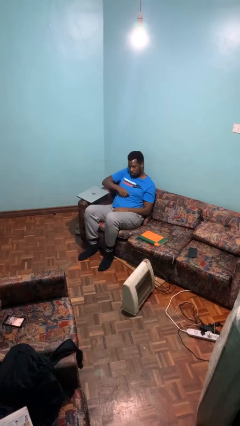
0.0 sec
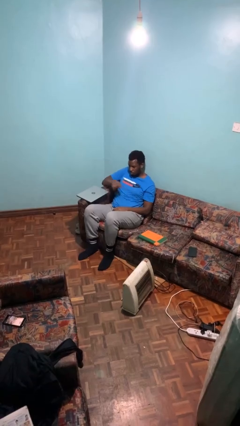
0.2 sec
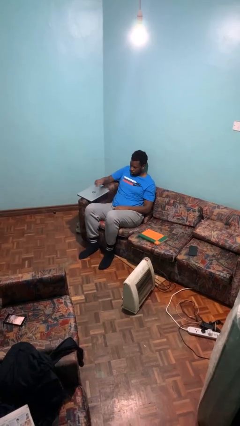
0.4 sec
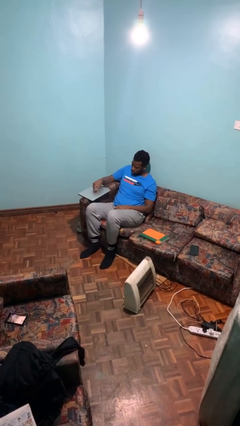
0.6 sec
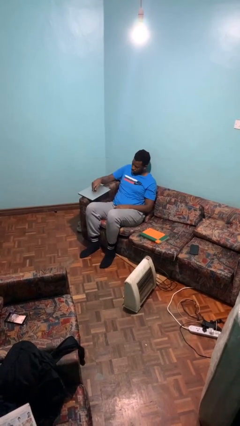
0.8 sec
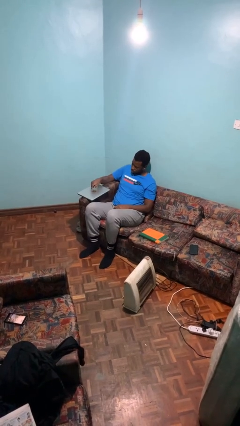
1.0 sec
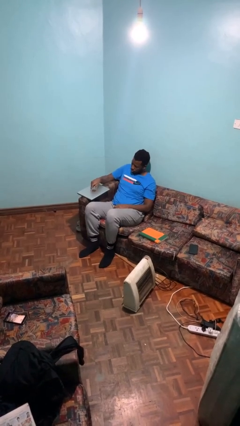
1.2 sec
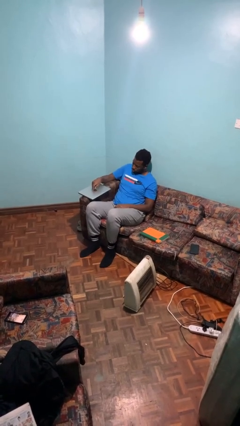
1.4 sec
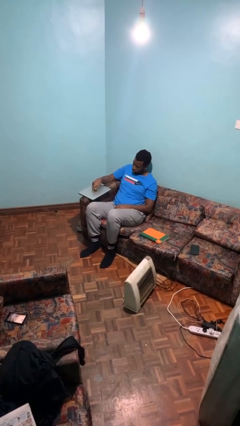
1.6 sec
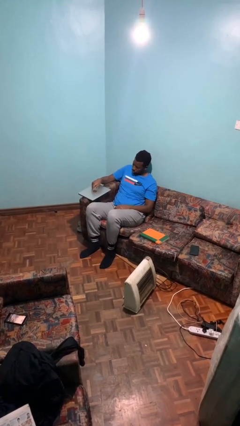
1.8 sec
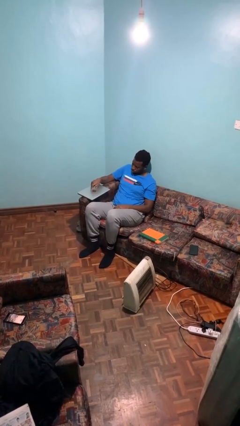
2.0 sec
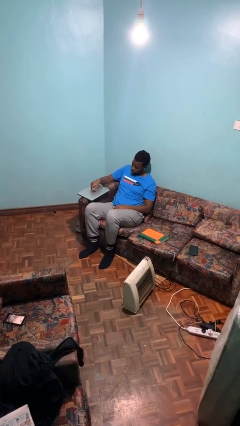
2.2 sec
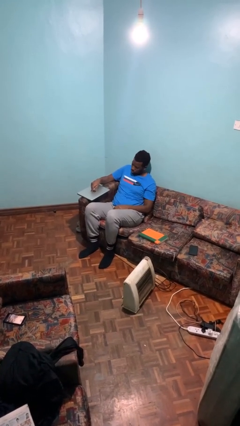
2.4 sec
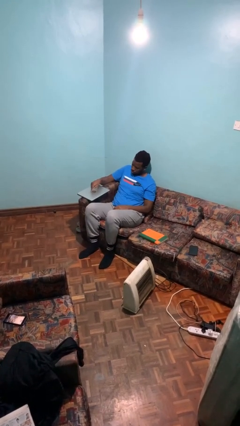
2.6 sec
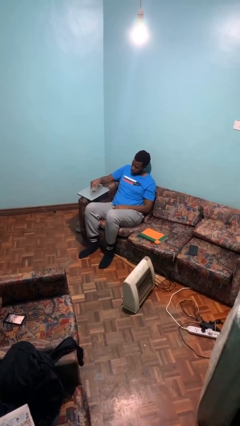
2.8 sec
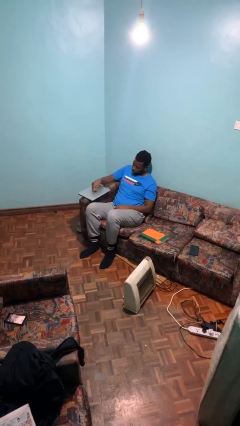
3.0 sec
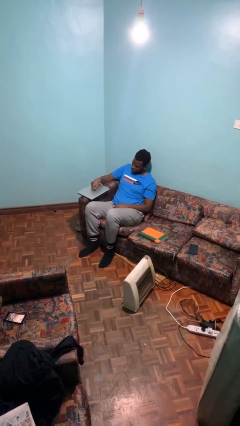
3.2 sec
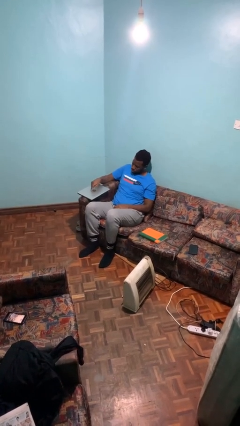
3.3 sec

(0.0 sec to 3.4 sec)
person taps object with finger

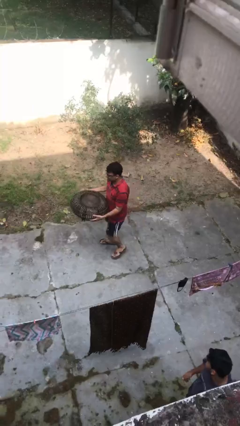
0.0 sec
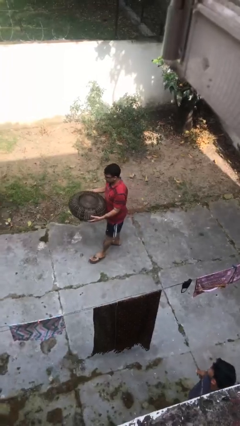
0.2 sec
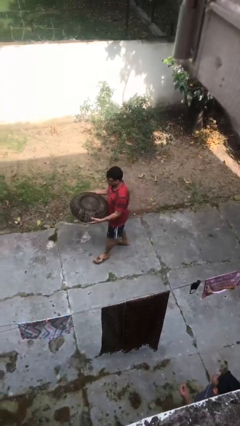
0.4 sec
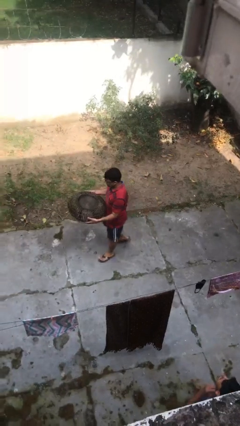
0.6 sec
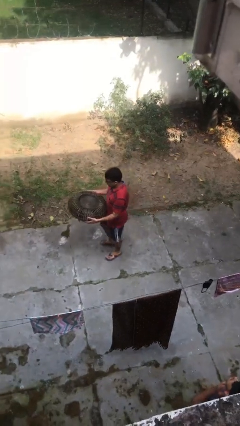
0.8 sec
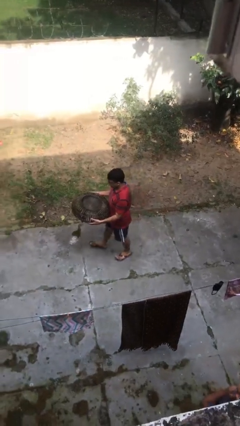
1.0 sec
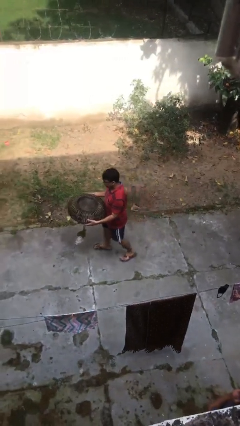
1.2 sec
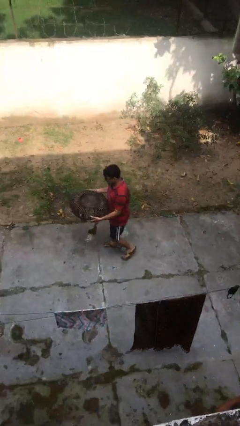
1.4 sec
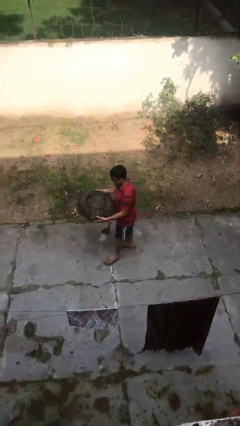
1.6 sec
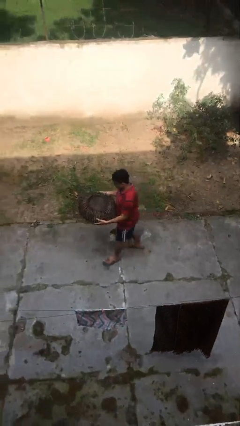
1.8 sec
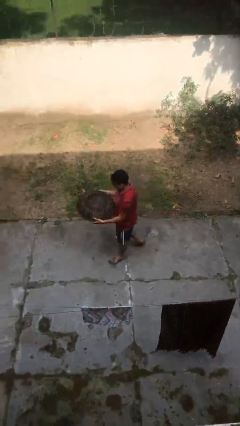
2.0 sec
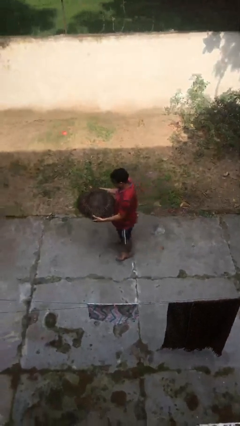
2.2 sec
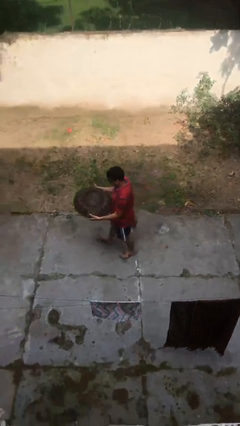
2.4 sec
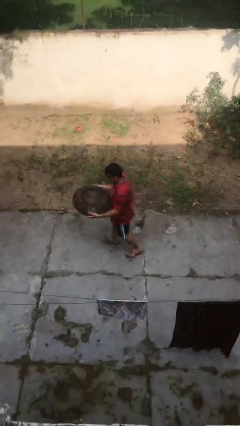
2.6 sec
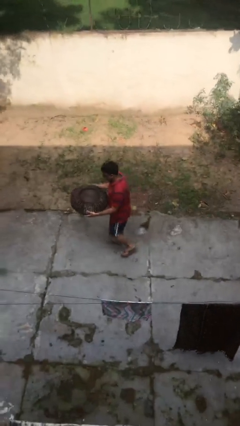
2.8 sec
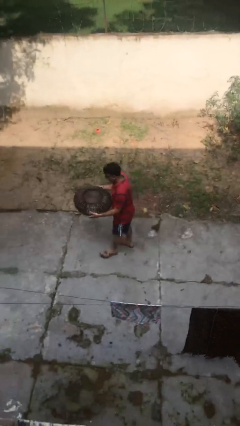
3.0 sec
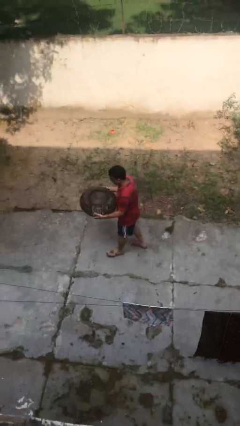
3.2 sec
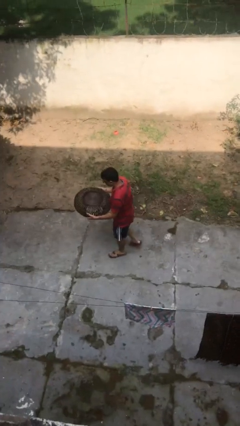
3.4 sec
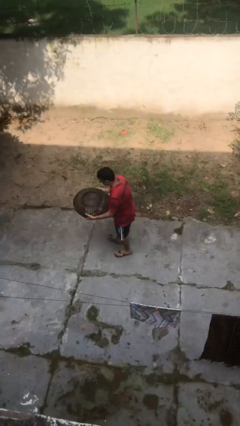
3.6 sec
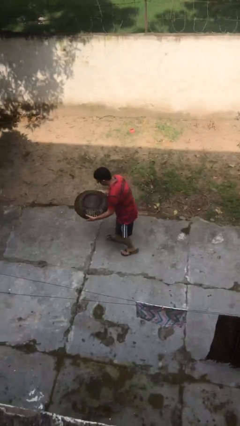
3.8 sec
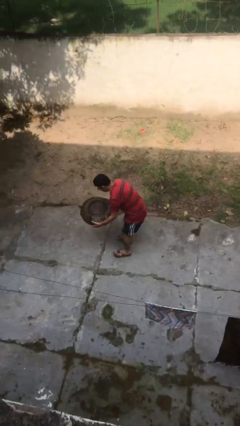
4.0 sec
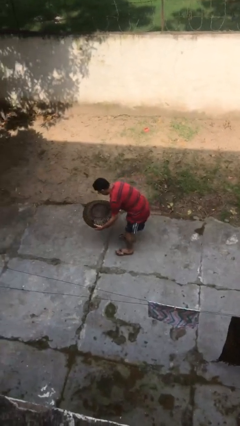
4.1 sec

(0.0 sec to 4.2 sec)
person carries heavy object

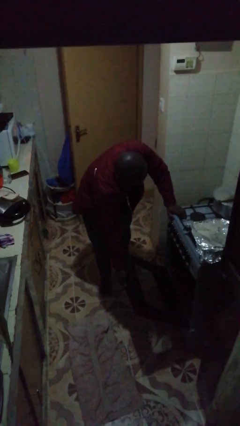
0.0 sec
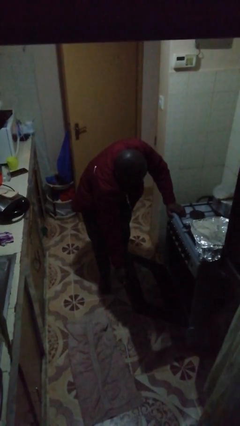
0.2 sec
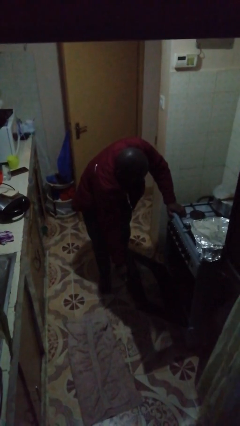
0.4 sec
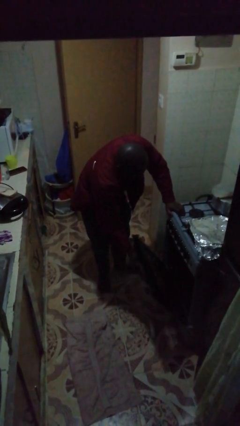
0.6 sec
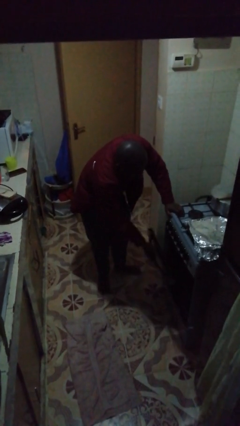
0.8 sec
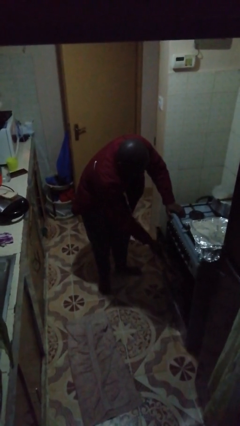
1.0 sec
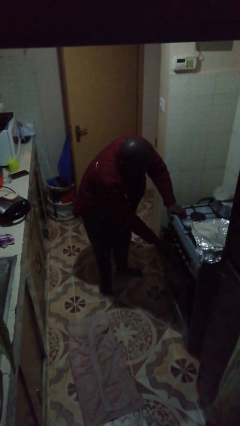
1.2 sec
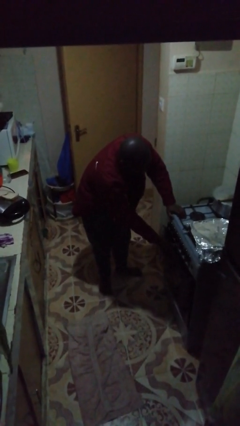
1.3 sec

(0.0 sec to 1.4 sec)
person closes oven door

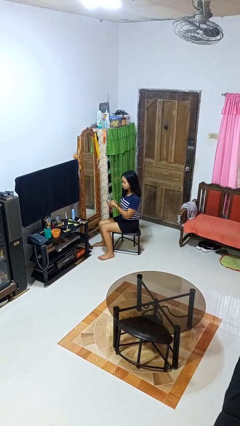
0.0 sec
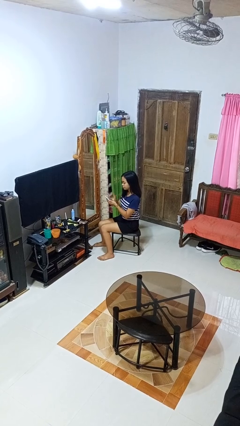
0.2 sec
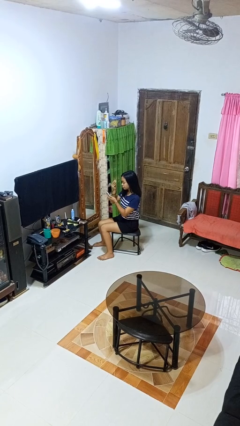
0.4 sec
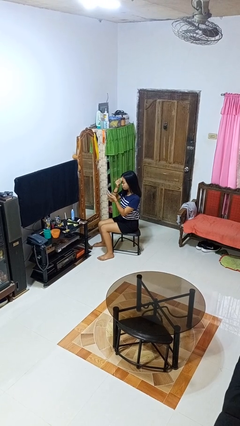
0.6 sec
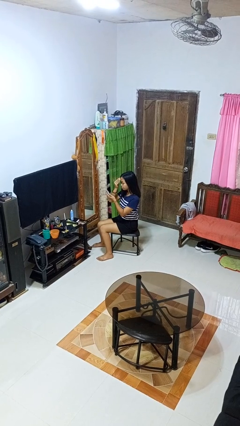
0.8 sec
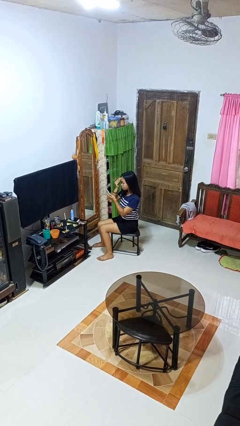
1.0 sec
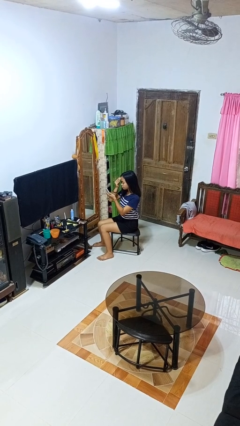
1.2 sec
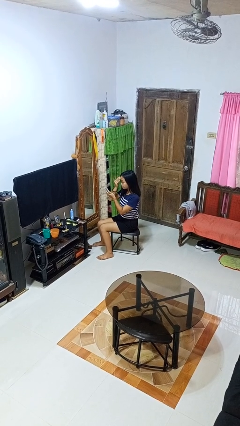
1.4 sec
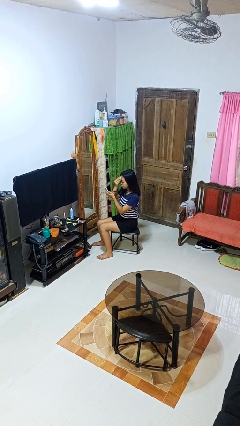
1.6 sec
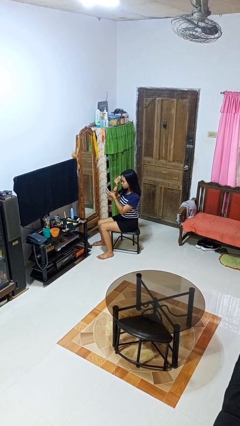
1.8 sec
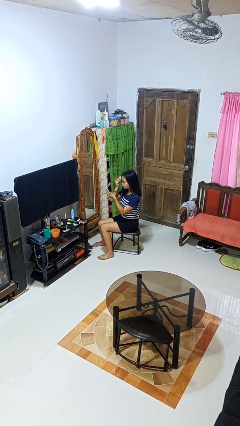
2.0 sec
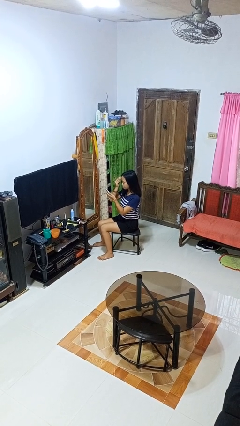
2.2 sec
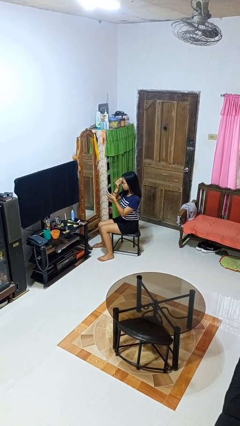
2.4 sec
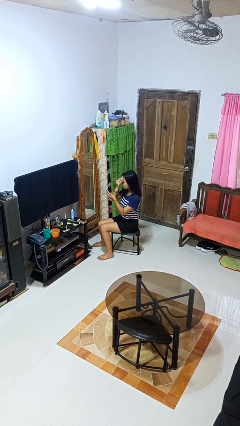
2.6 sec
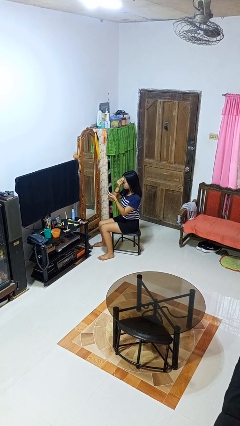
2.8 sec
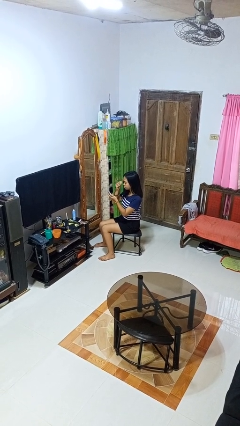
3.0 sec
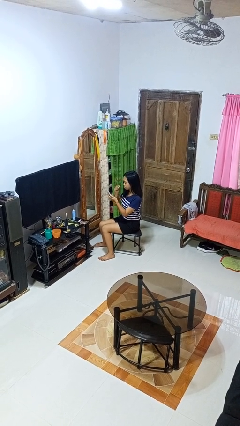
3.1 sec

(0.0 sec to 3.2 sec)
person applies foundation makeup

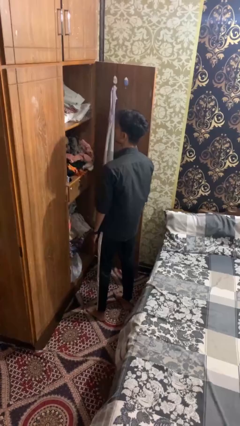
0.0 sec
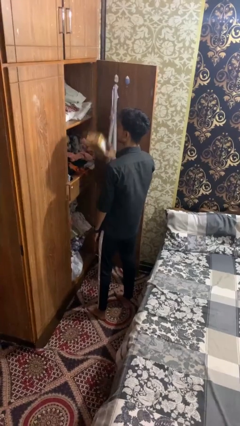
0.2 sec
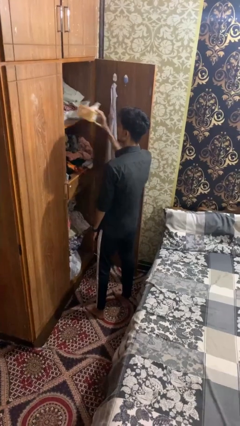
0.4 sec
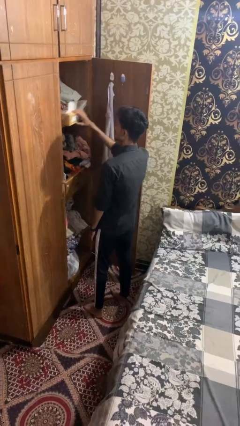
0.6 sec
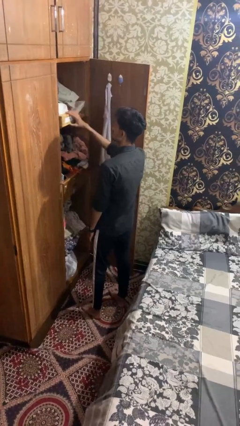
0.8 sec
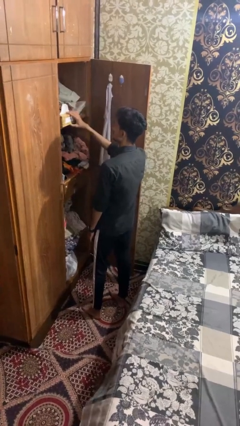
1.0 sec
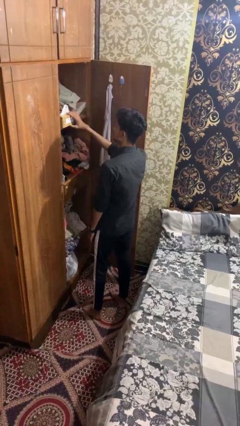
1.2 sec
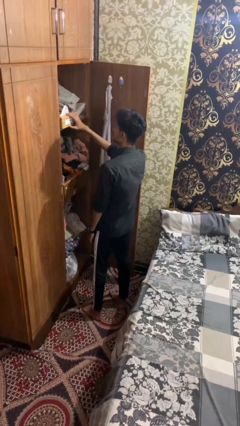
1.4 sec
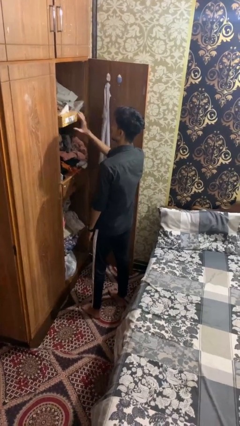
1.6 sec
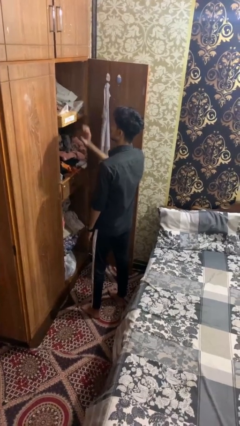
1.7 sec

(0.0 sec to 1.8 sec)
person puts down object on countertop

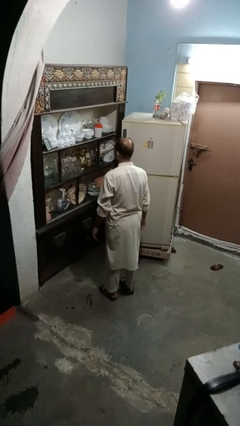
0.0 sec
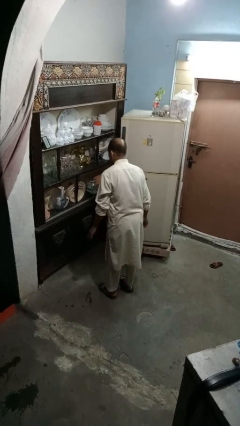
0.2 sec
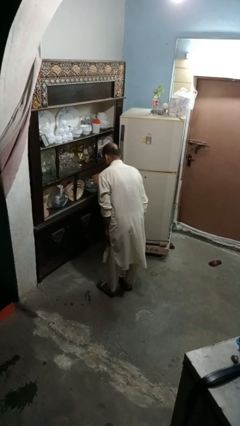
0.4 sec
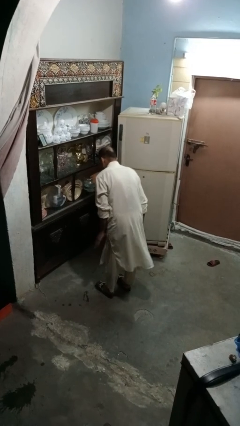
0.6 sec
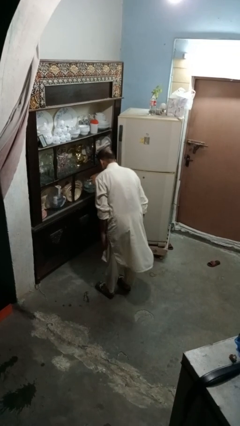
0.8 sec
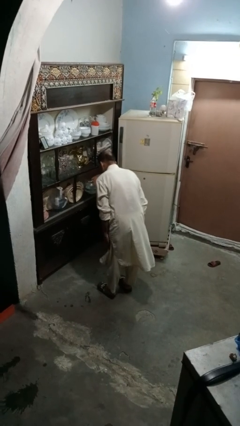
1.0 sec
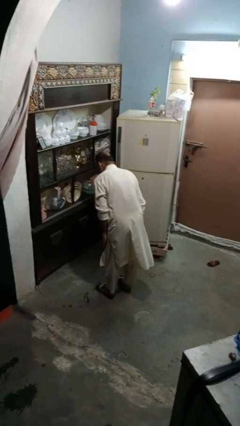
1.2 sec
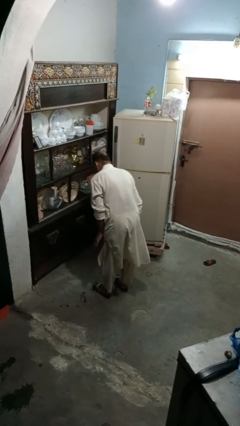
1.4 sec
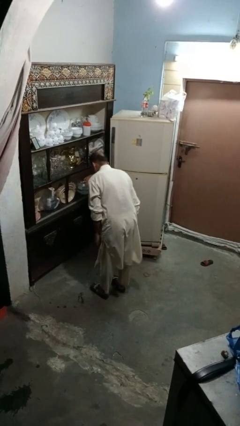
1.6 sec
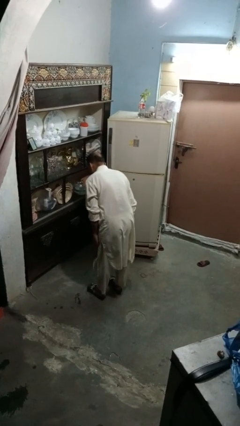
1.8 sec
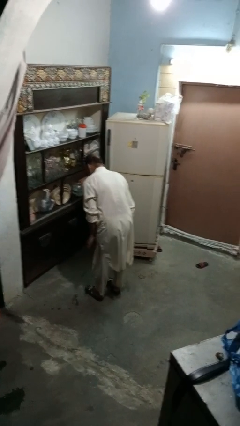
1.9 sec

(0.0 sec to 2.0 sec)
person slaps hands on thighs

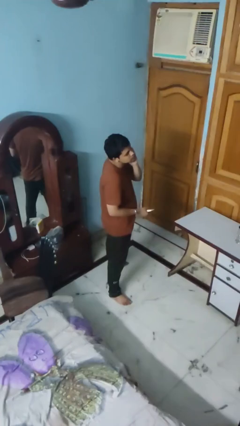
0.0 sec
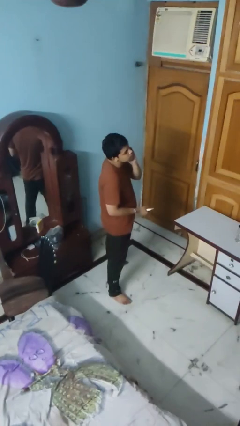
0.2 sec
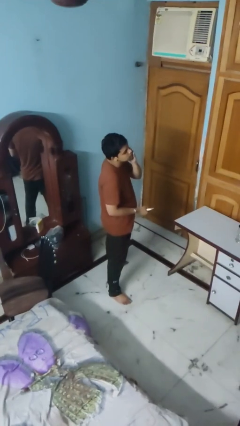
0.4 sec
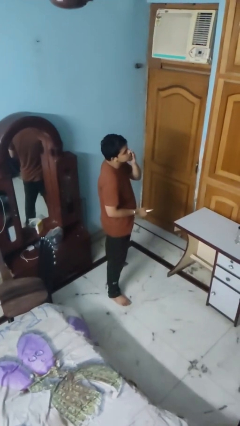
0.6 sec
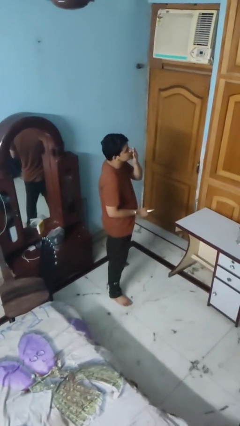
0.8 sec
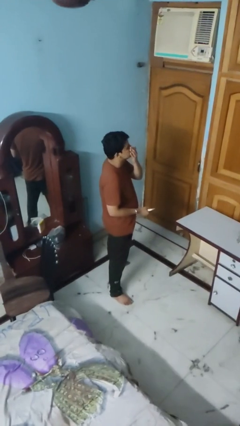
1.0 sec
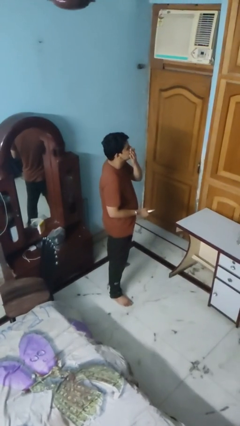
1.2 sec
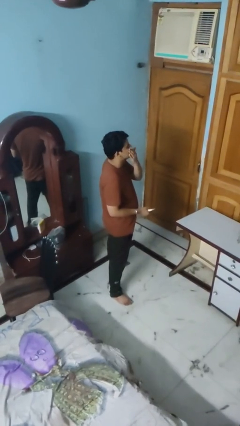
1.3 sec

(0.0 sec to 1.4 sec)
person applies facial moisturizer
